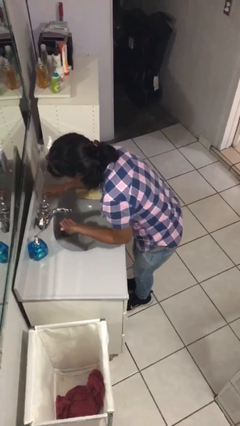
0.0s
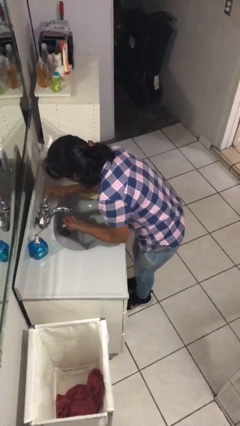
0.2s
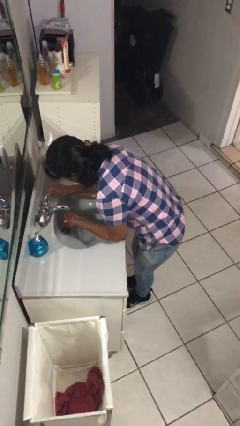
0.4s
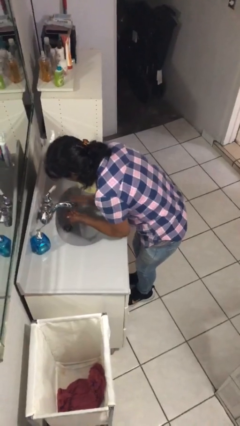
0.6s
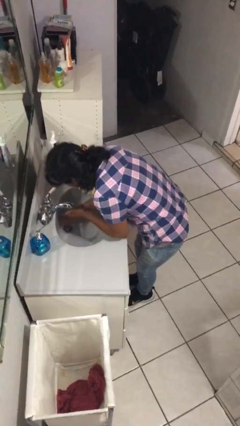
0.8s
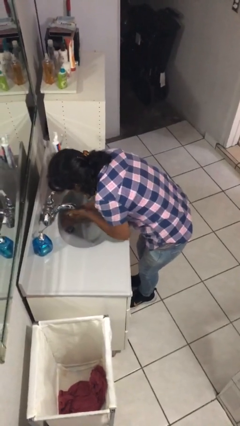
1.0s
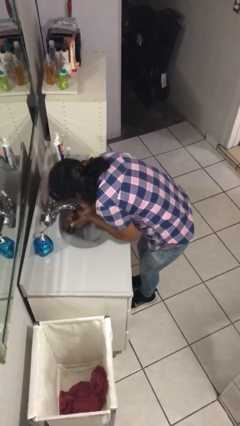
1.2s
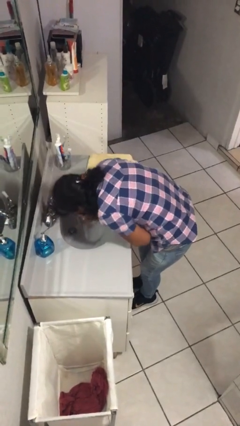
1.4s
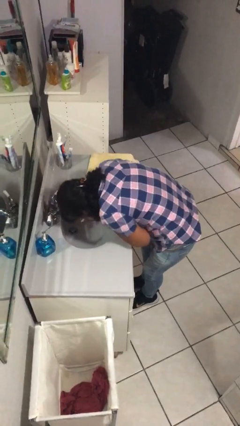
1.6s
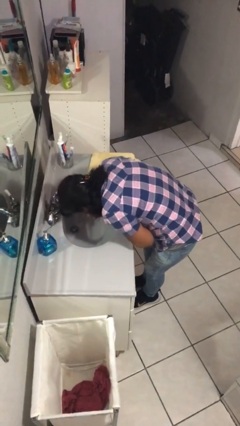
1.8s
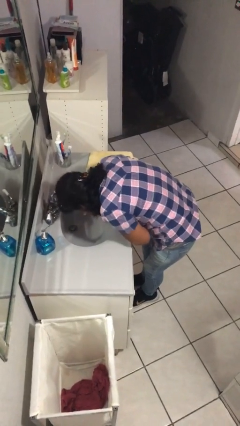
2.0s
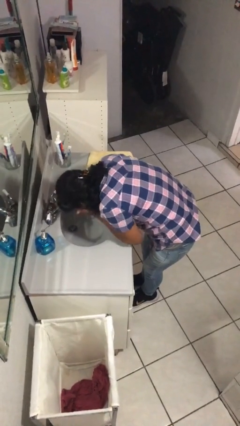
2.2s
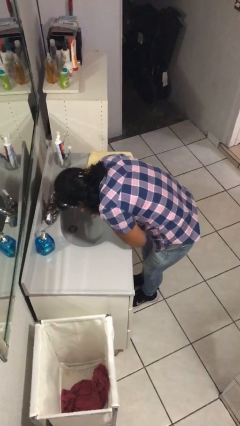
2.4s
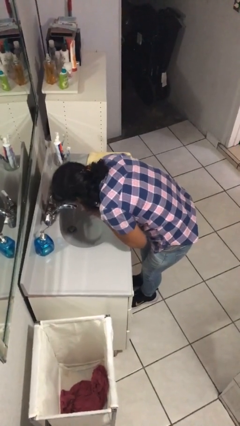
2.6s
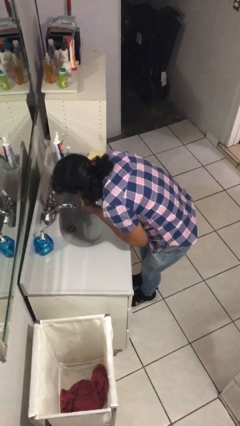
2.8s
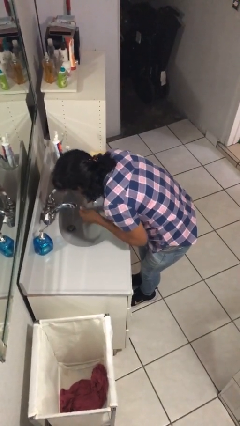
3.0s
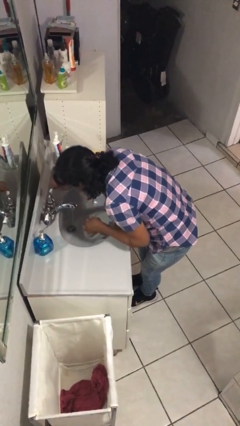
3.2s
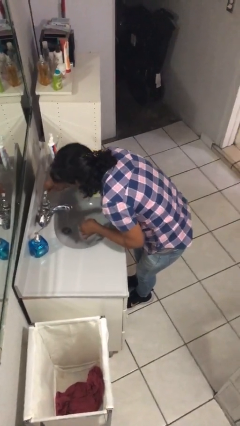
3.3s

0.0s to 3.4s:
person washes face

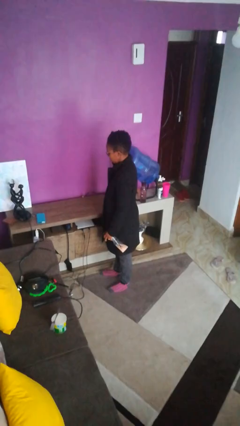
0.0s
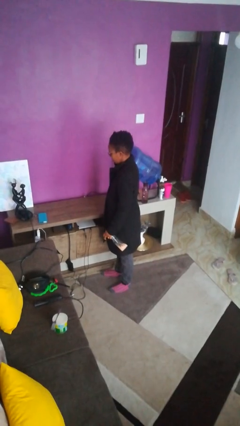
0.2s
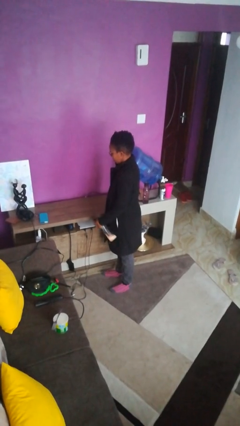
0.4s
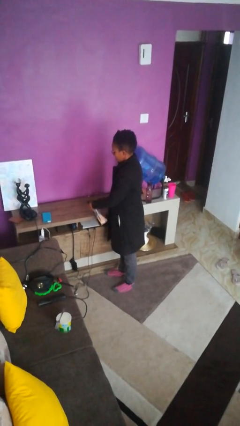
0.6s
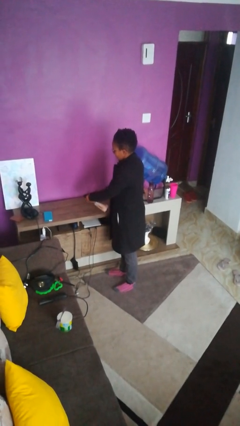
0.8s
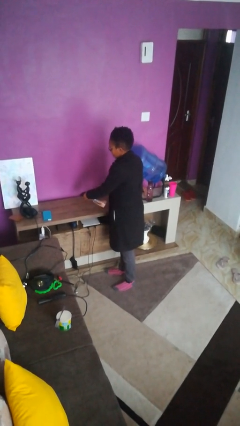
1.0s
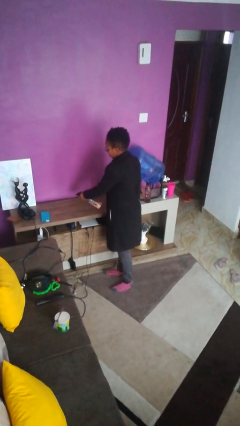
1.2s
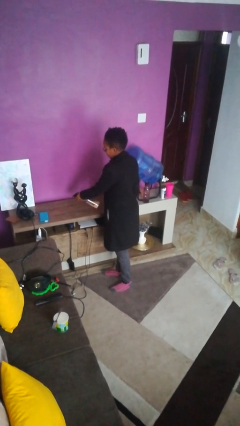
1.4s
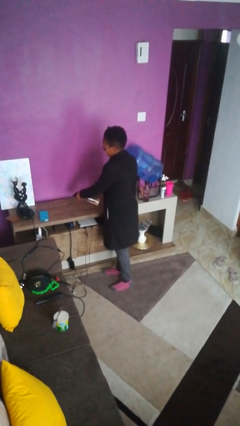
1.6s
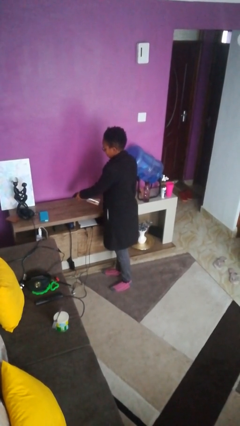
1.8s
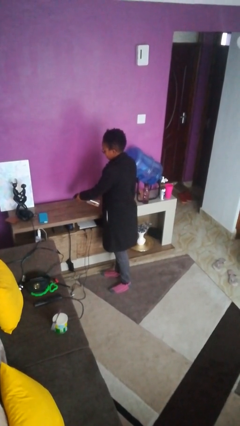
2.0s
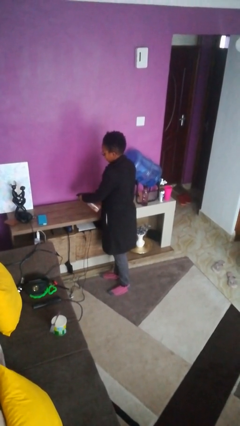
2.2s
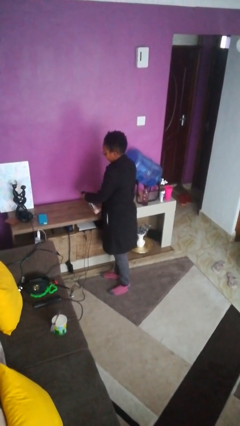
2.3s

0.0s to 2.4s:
person sprays from bottle

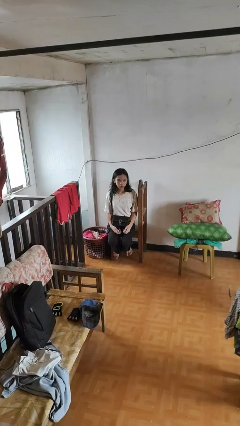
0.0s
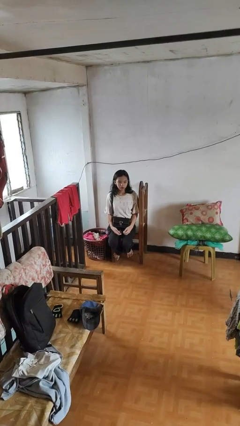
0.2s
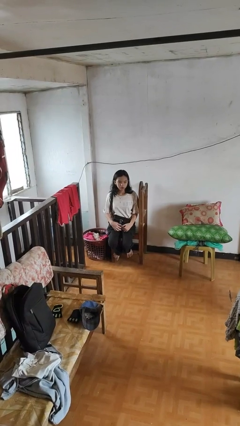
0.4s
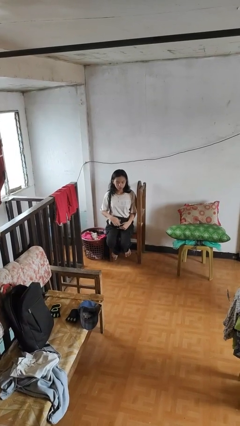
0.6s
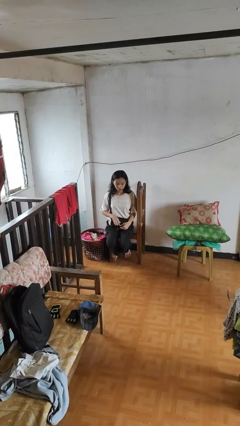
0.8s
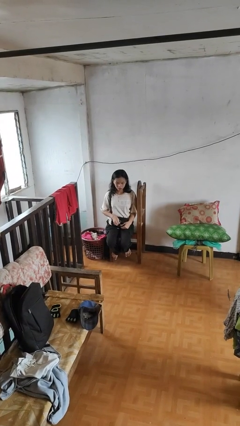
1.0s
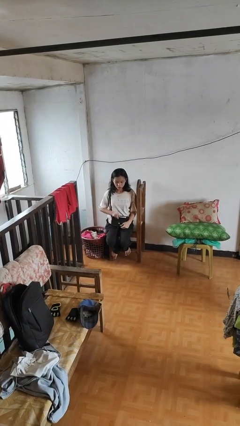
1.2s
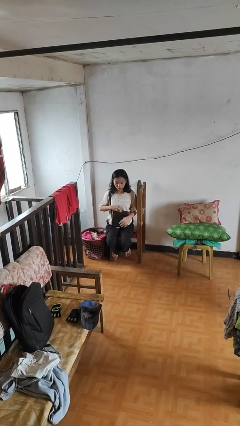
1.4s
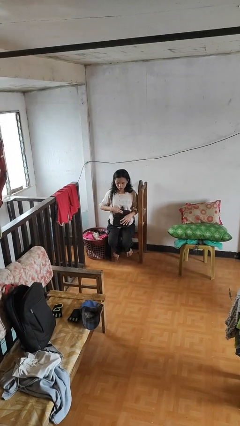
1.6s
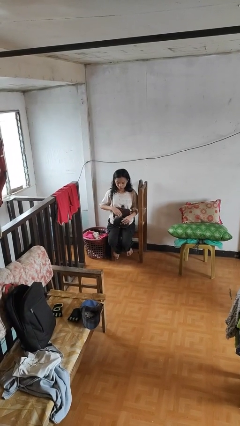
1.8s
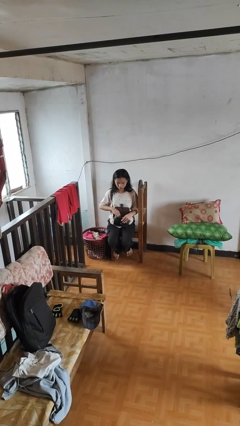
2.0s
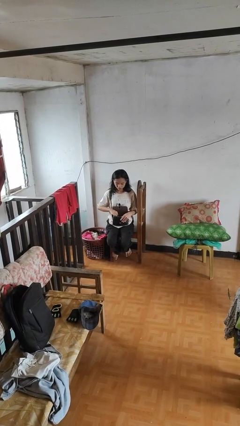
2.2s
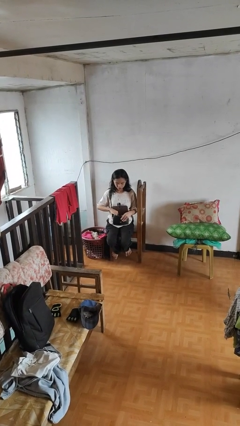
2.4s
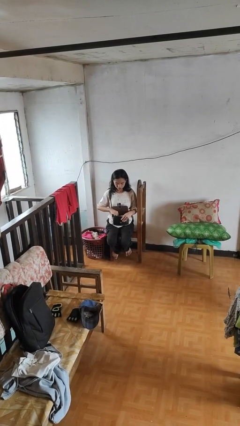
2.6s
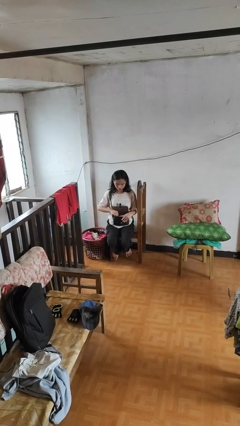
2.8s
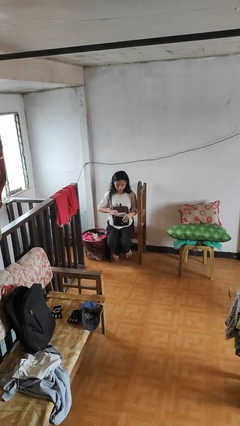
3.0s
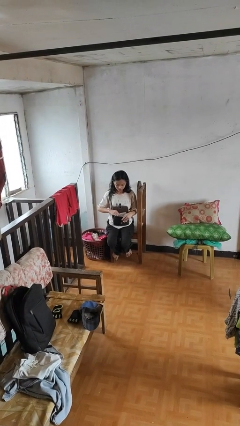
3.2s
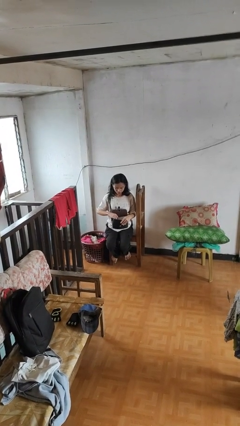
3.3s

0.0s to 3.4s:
person searches in purse

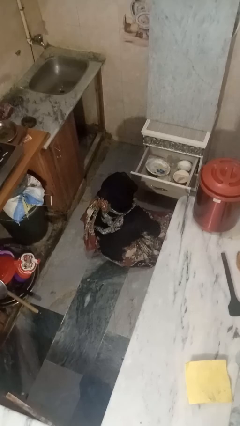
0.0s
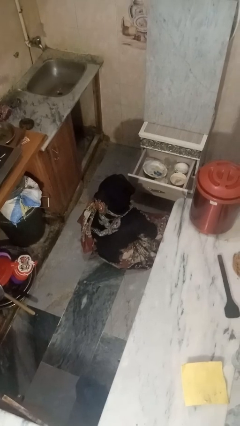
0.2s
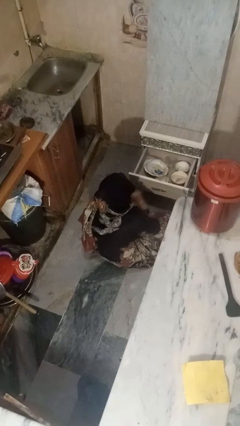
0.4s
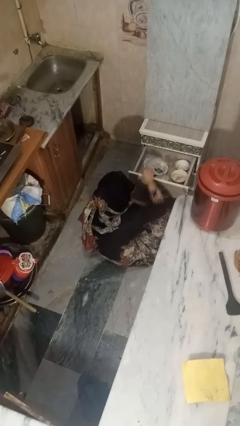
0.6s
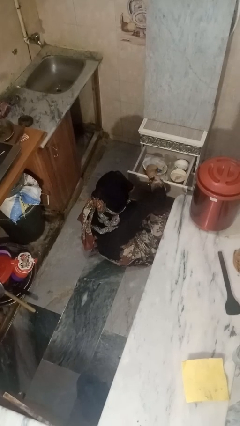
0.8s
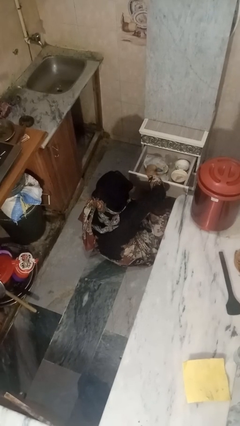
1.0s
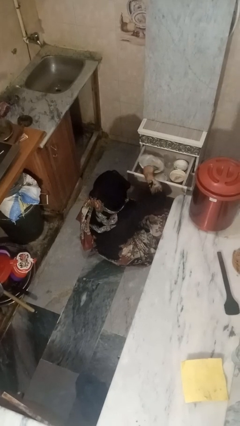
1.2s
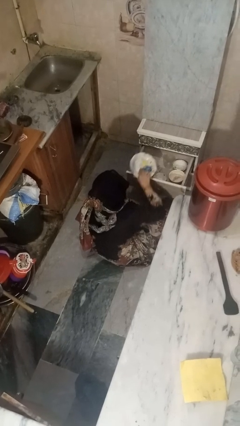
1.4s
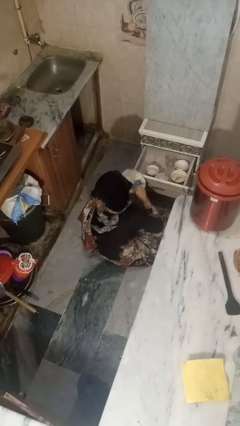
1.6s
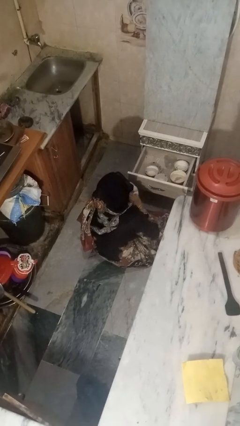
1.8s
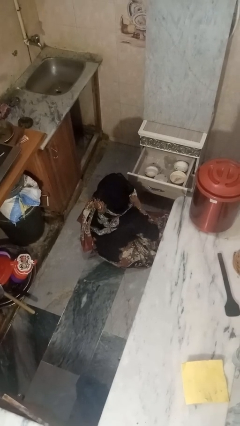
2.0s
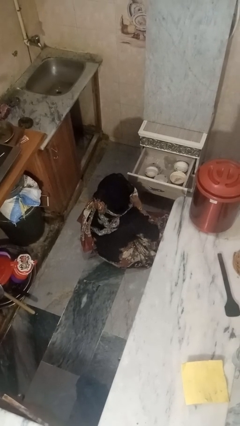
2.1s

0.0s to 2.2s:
person takes object from kitchen drawer

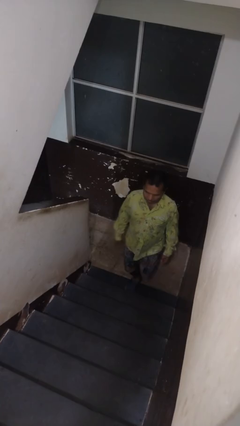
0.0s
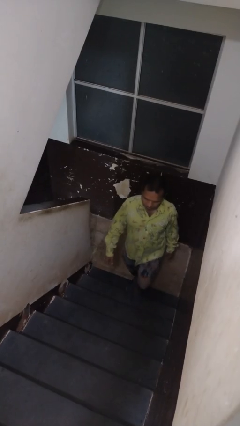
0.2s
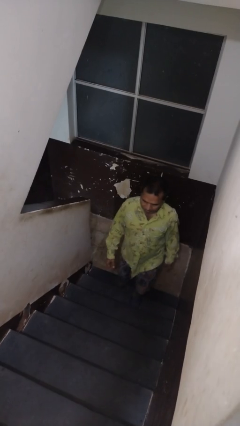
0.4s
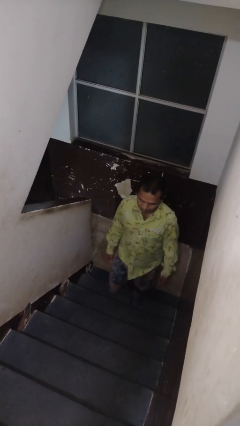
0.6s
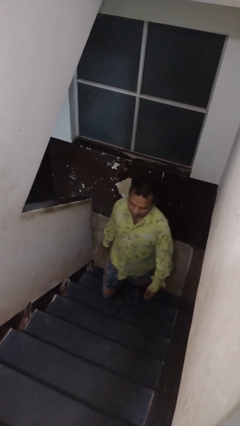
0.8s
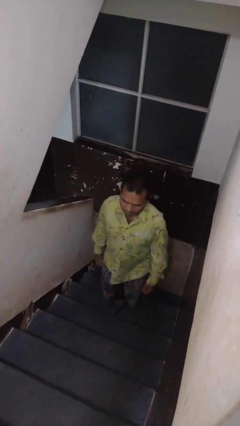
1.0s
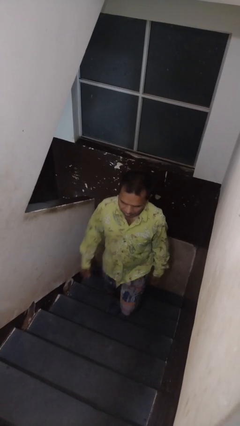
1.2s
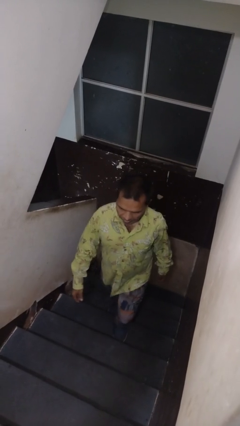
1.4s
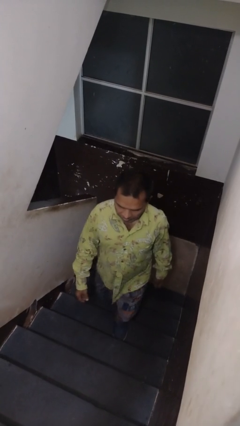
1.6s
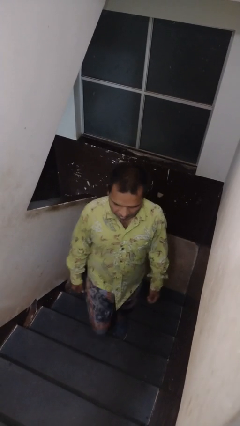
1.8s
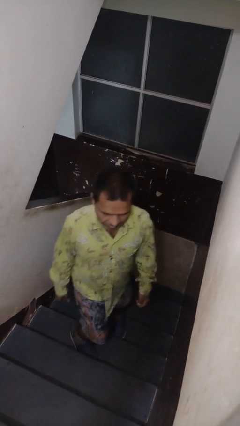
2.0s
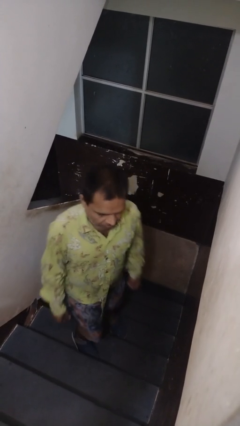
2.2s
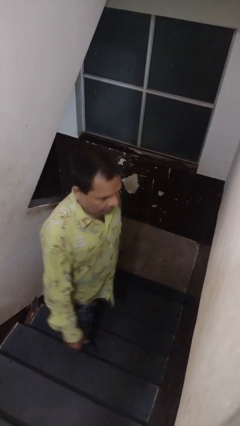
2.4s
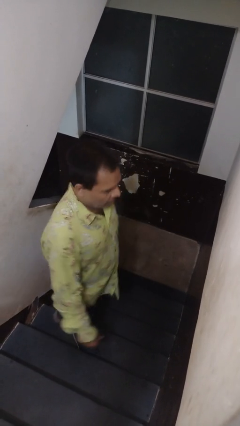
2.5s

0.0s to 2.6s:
person climbs up stairs

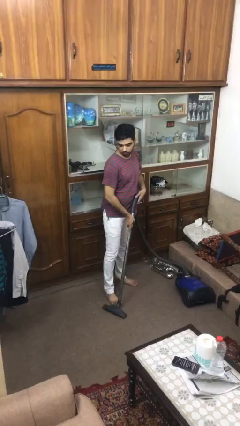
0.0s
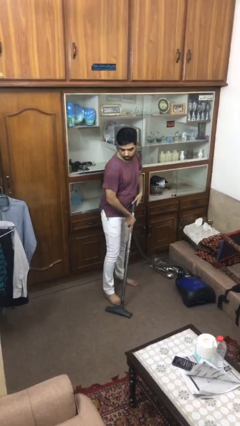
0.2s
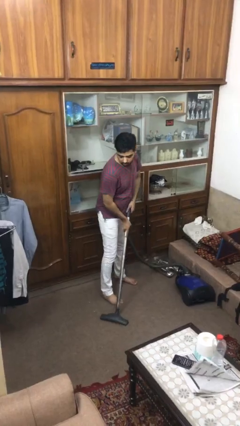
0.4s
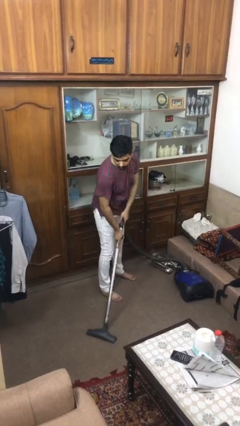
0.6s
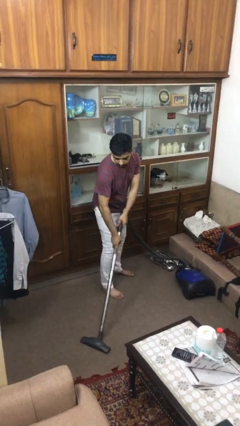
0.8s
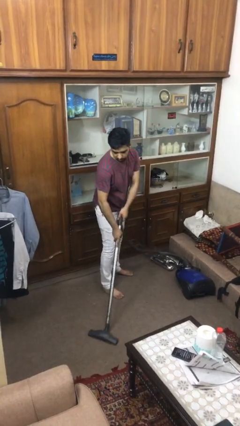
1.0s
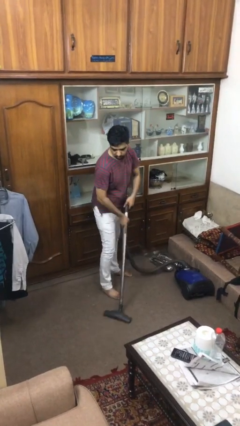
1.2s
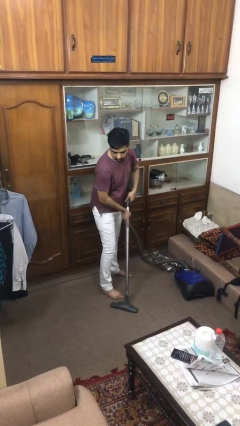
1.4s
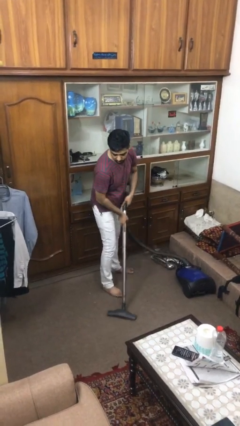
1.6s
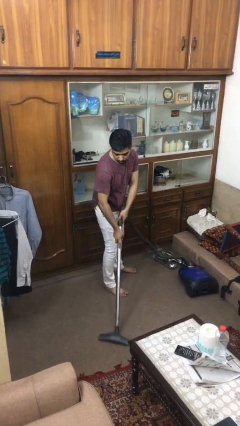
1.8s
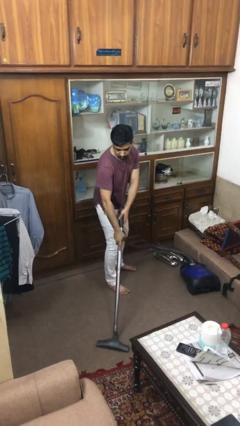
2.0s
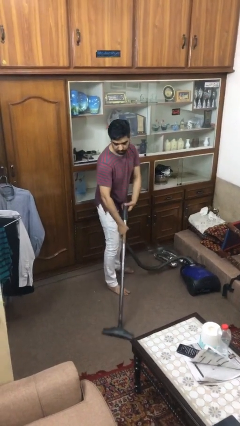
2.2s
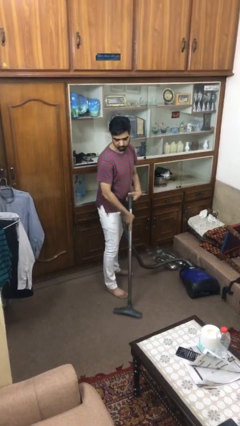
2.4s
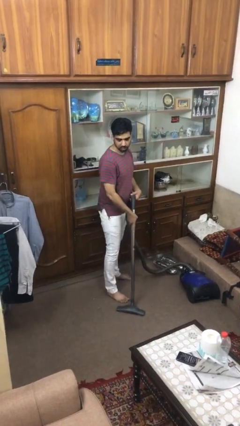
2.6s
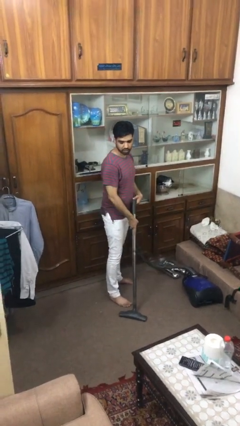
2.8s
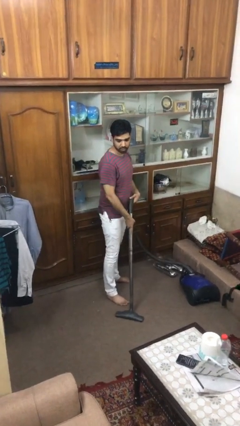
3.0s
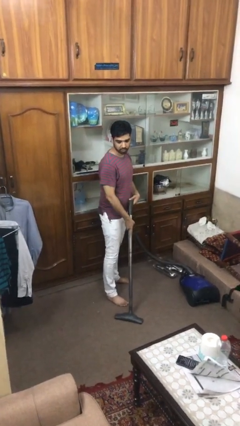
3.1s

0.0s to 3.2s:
person vacuums carpet

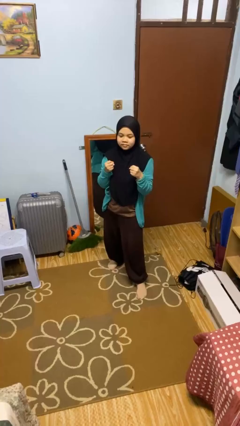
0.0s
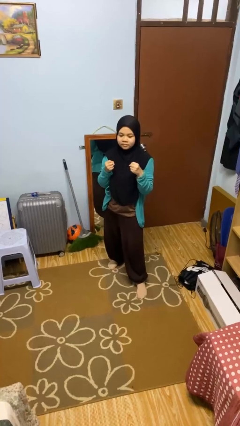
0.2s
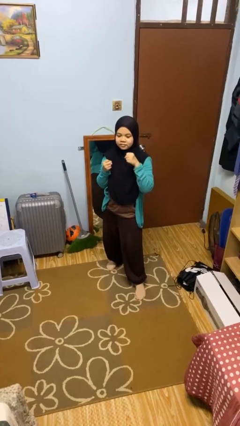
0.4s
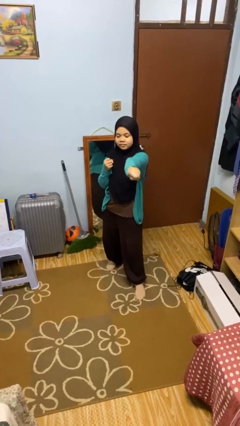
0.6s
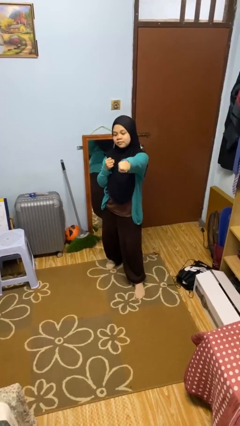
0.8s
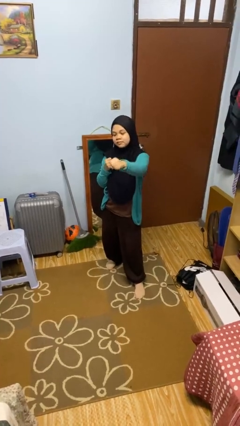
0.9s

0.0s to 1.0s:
person punches
